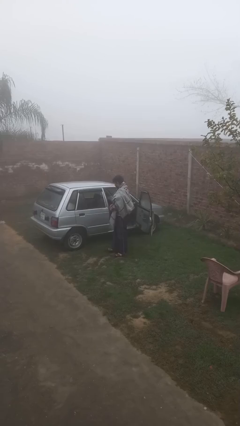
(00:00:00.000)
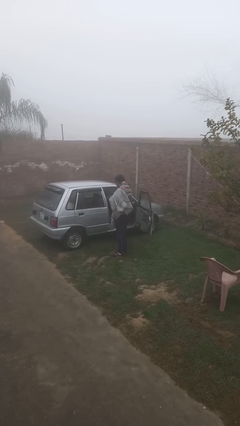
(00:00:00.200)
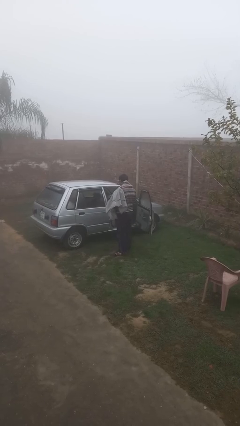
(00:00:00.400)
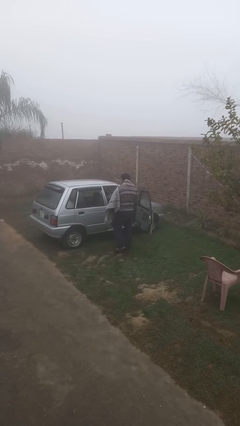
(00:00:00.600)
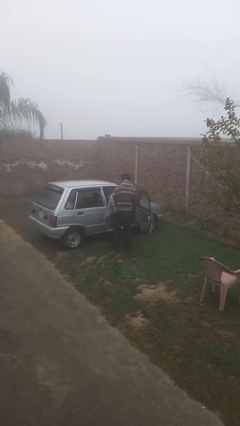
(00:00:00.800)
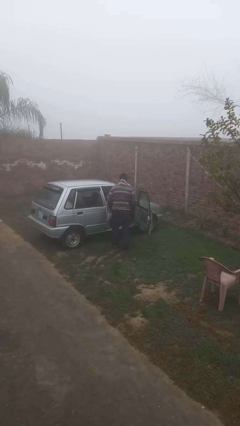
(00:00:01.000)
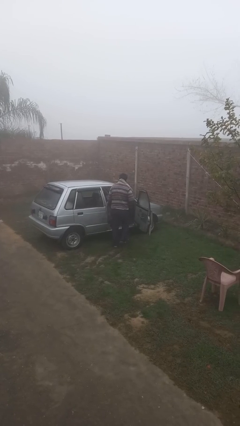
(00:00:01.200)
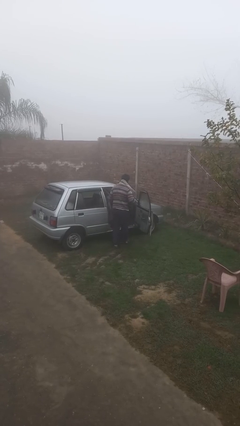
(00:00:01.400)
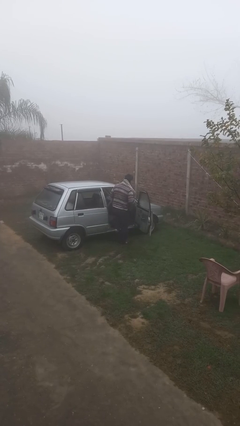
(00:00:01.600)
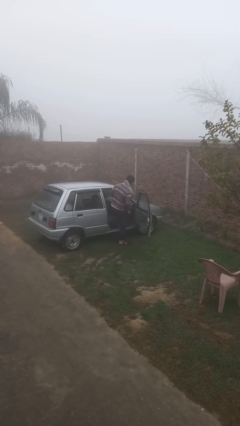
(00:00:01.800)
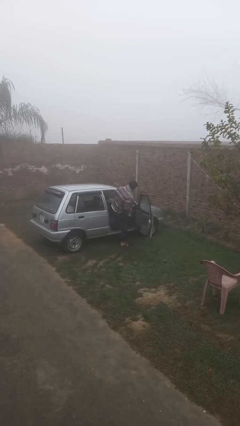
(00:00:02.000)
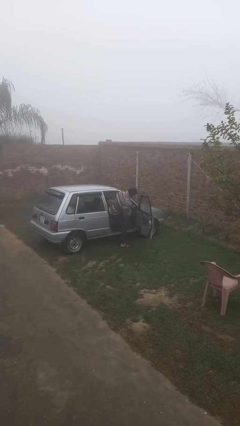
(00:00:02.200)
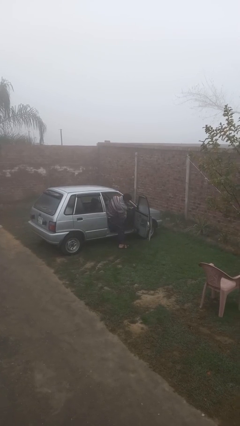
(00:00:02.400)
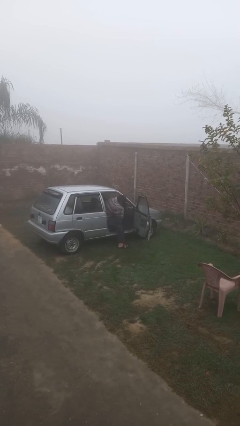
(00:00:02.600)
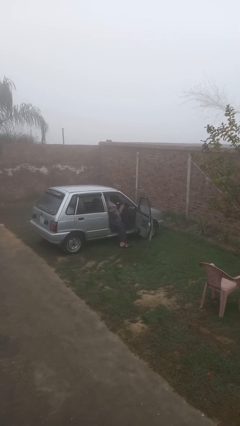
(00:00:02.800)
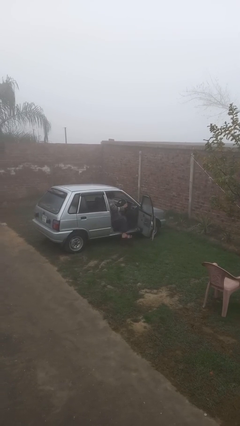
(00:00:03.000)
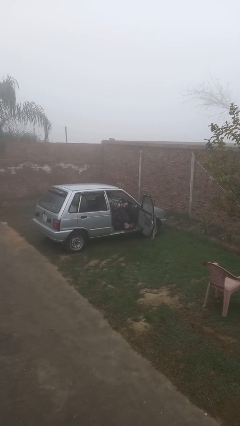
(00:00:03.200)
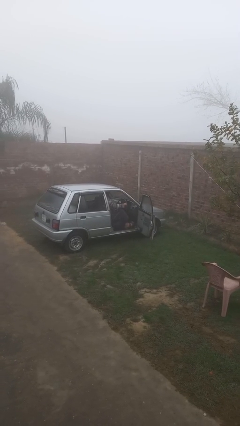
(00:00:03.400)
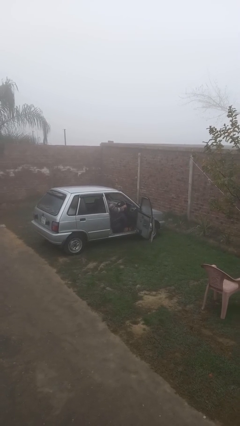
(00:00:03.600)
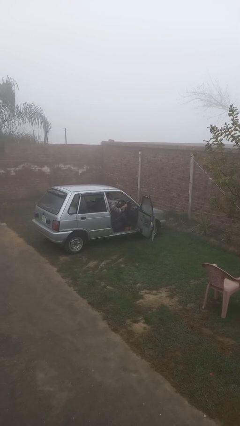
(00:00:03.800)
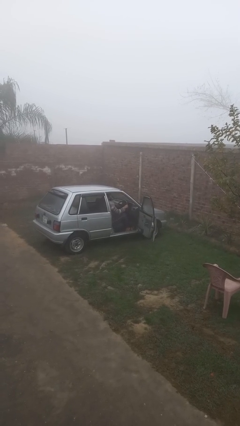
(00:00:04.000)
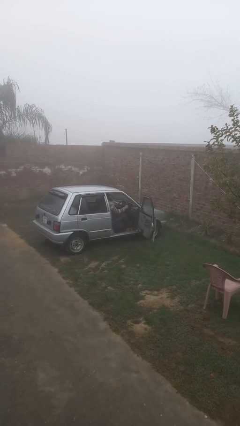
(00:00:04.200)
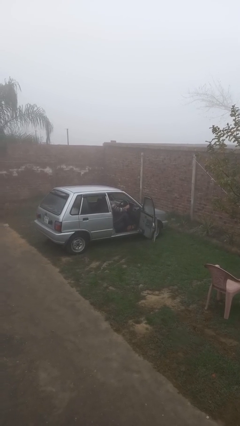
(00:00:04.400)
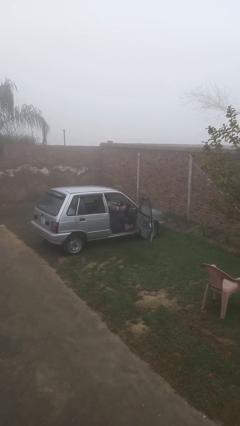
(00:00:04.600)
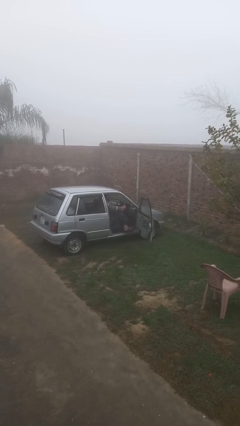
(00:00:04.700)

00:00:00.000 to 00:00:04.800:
person enters car

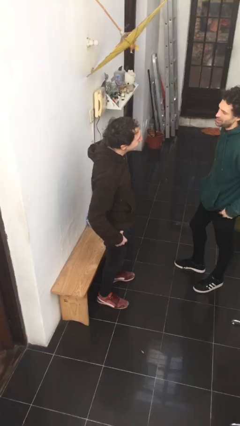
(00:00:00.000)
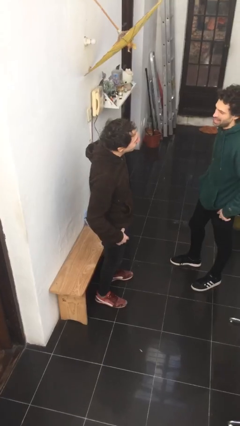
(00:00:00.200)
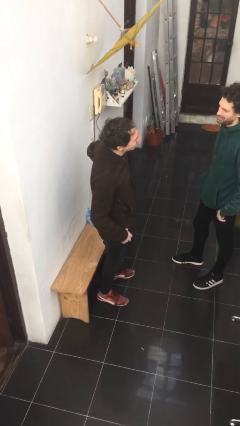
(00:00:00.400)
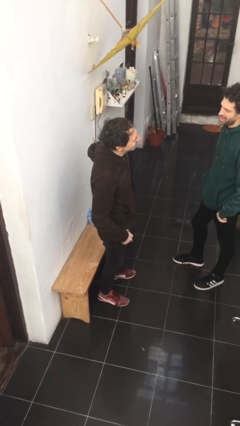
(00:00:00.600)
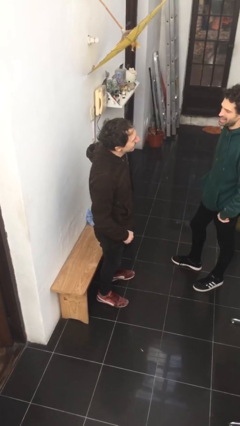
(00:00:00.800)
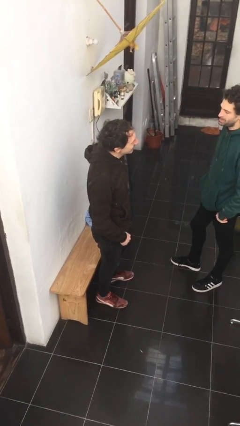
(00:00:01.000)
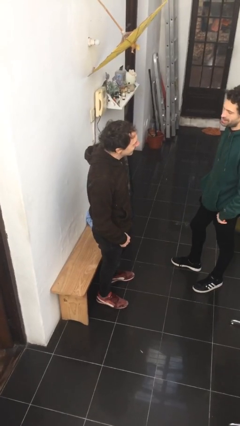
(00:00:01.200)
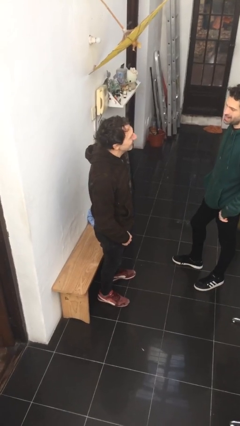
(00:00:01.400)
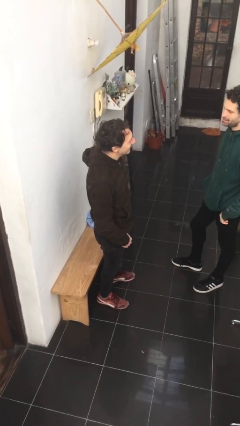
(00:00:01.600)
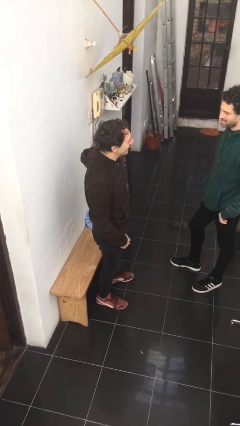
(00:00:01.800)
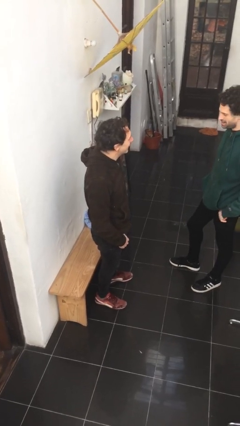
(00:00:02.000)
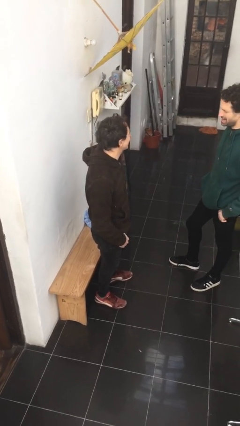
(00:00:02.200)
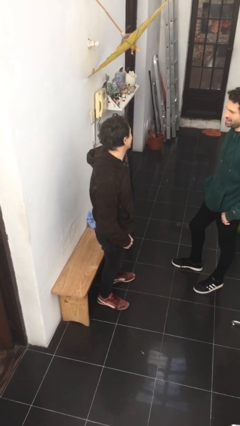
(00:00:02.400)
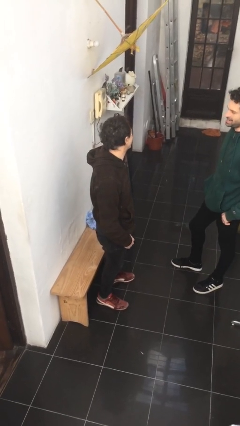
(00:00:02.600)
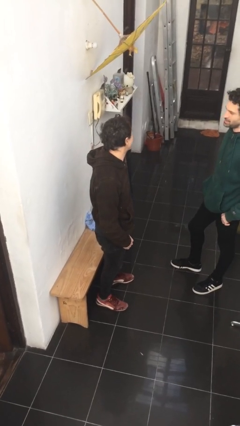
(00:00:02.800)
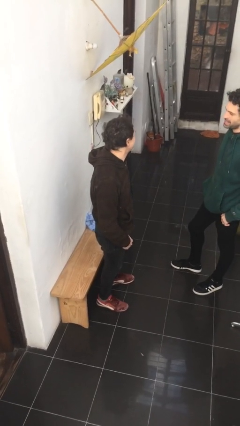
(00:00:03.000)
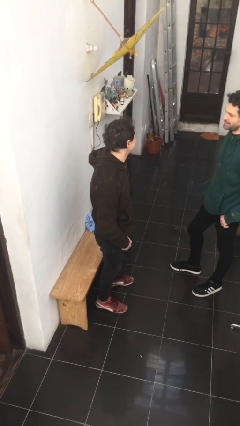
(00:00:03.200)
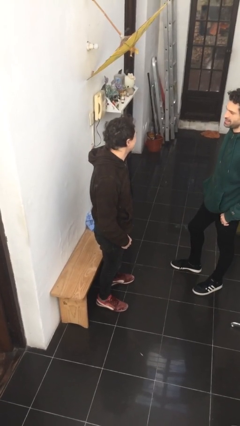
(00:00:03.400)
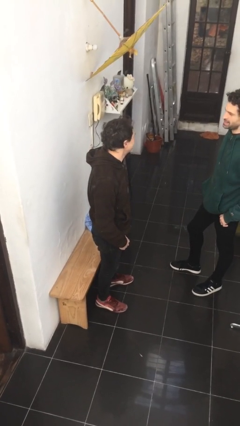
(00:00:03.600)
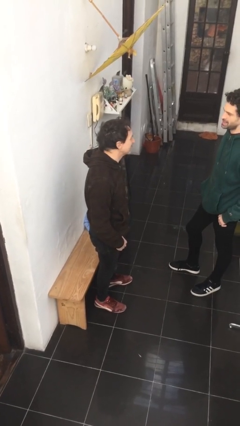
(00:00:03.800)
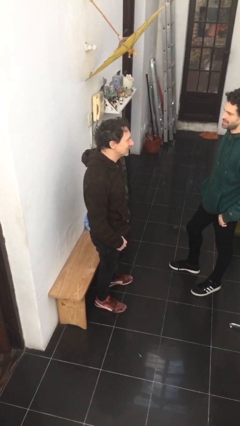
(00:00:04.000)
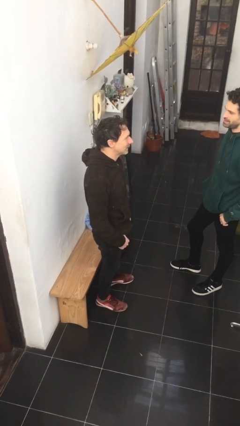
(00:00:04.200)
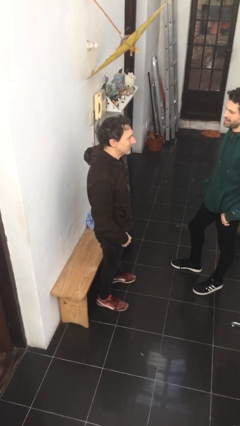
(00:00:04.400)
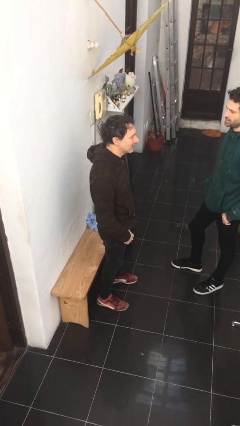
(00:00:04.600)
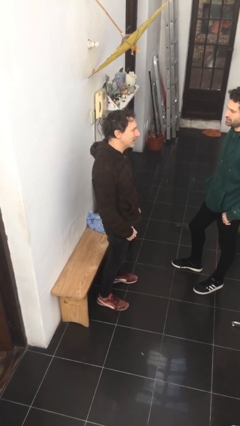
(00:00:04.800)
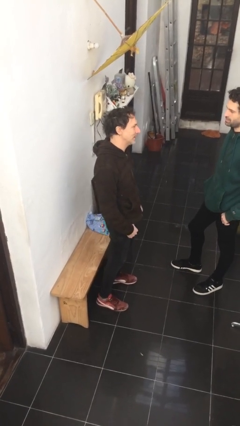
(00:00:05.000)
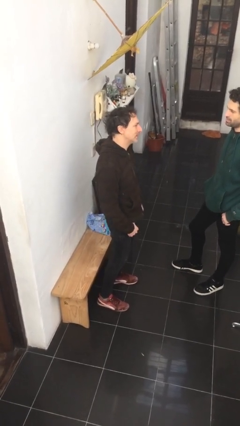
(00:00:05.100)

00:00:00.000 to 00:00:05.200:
person talks to person

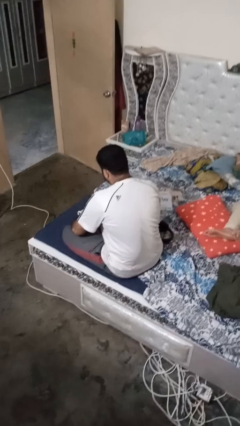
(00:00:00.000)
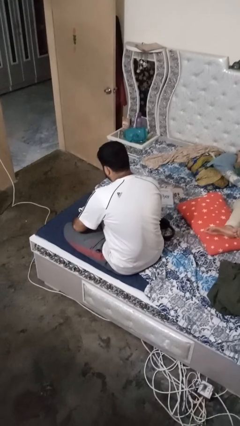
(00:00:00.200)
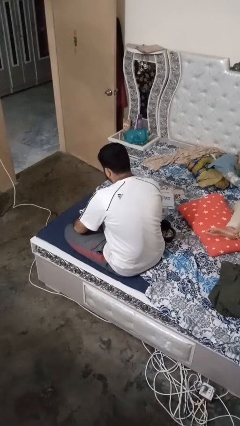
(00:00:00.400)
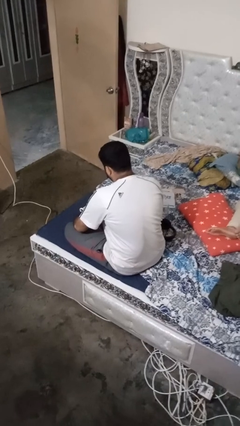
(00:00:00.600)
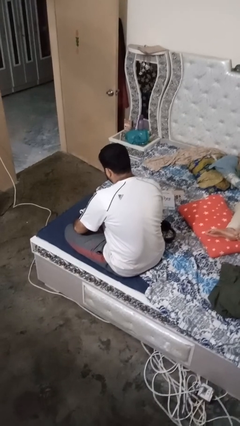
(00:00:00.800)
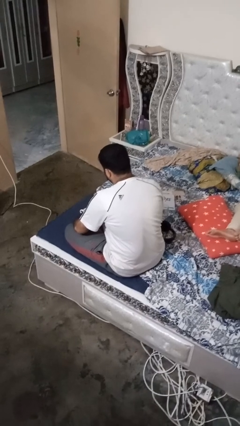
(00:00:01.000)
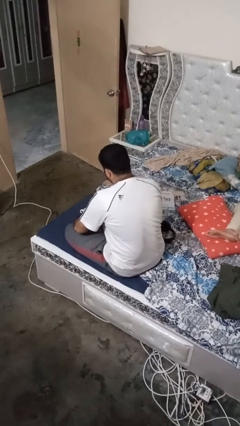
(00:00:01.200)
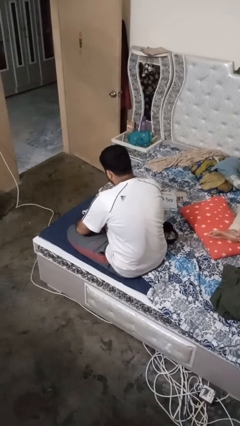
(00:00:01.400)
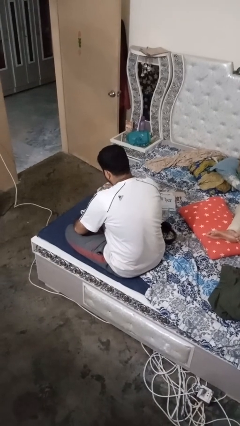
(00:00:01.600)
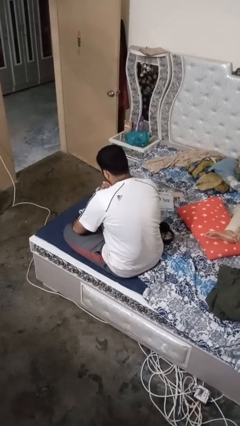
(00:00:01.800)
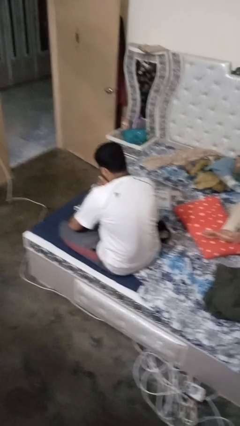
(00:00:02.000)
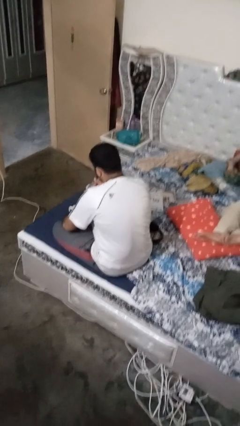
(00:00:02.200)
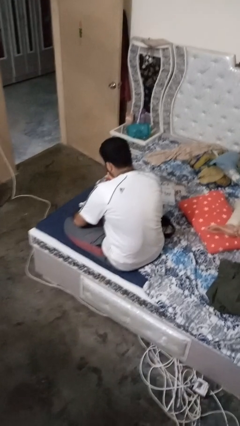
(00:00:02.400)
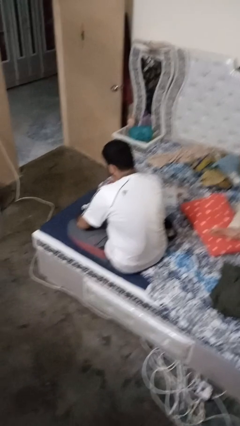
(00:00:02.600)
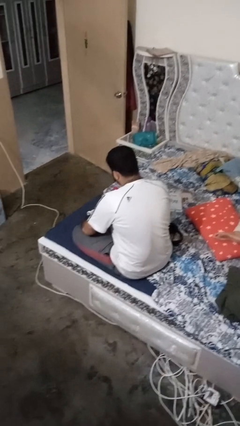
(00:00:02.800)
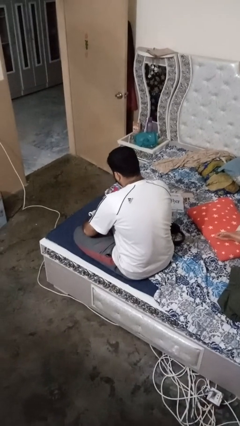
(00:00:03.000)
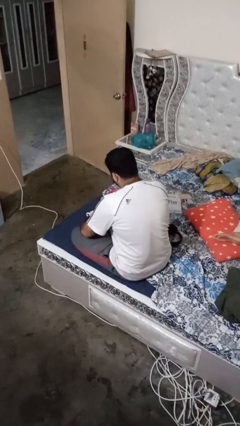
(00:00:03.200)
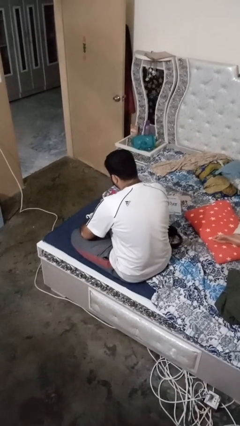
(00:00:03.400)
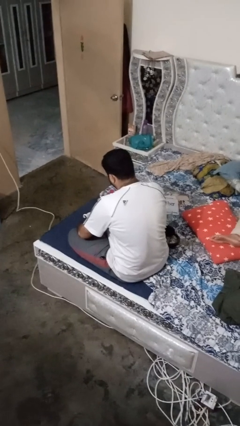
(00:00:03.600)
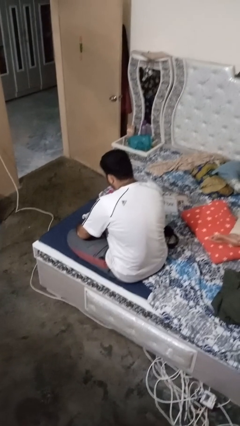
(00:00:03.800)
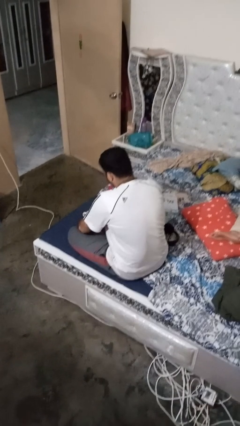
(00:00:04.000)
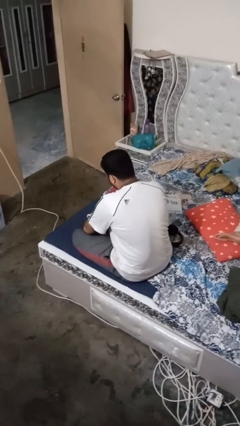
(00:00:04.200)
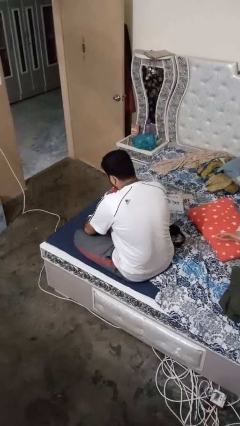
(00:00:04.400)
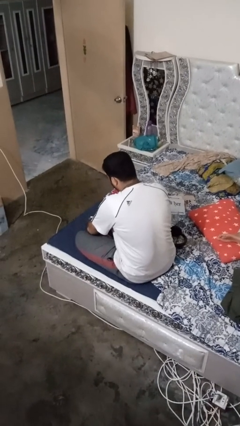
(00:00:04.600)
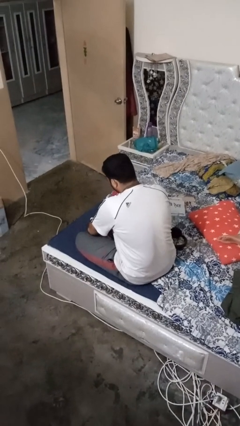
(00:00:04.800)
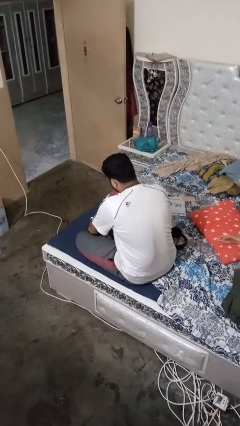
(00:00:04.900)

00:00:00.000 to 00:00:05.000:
person unscrews lid from bottle

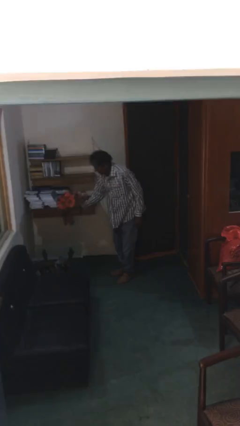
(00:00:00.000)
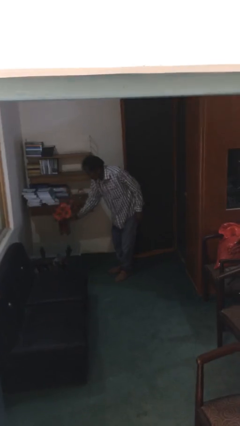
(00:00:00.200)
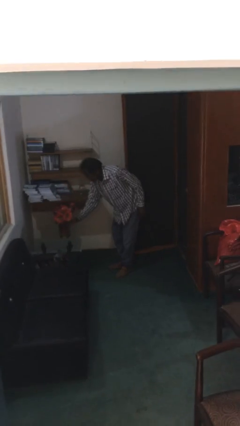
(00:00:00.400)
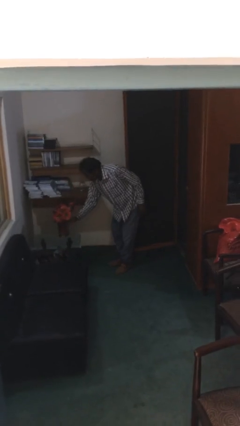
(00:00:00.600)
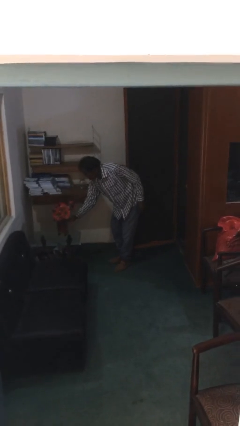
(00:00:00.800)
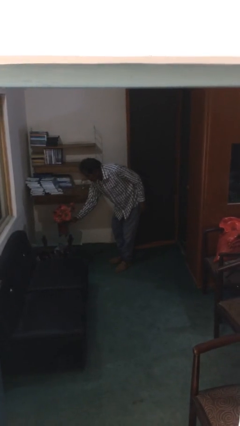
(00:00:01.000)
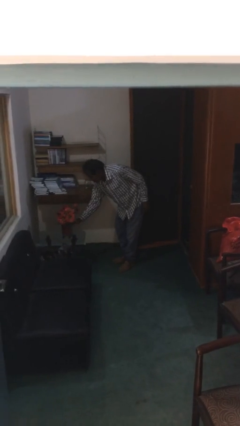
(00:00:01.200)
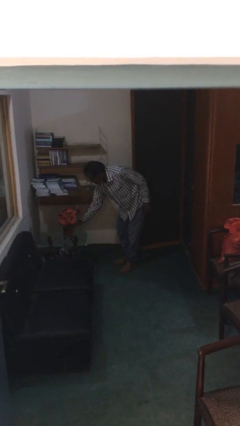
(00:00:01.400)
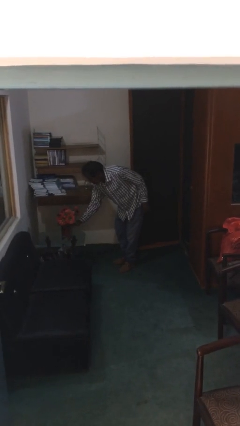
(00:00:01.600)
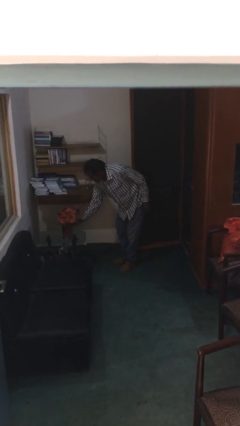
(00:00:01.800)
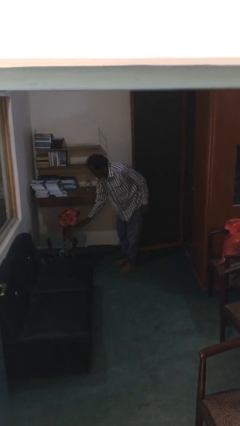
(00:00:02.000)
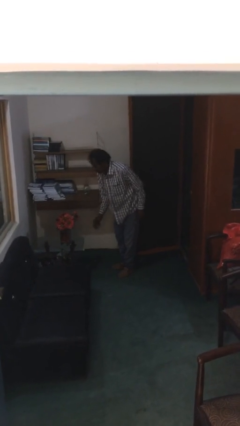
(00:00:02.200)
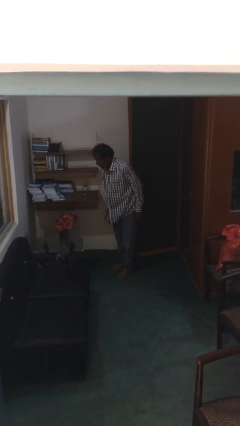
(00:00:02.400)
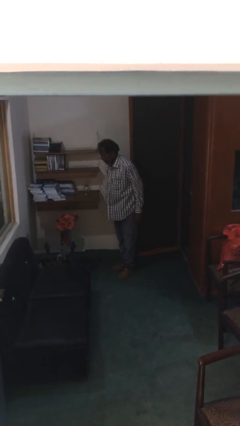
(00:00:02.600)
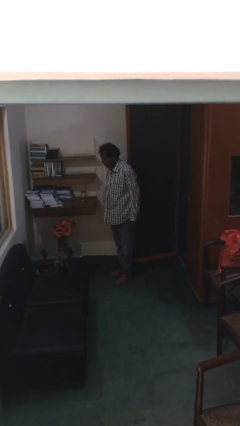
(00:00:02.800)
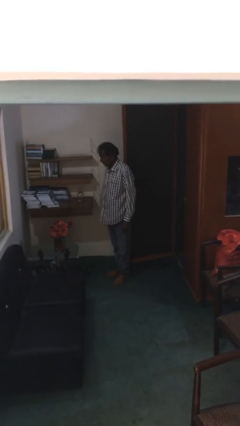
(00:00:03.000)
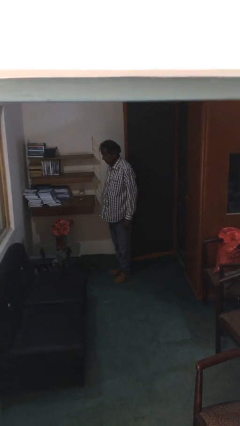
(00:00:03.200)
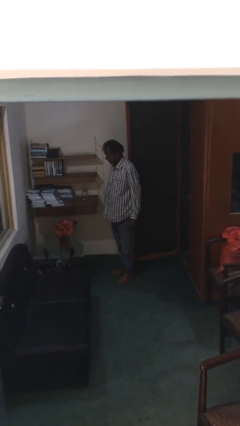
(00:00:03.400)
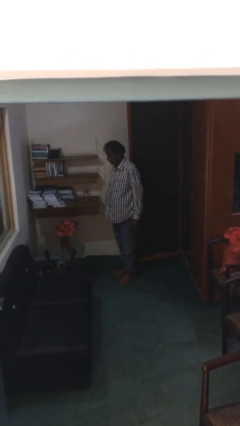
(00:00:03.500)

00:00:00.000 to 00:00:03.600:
person puts down object on table
